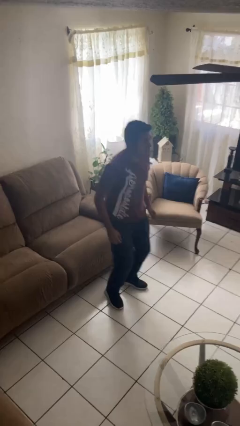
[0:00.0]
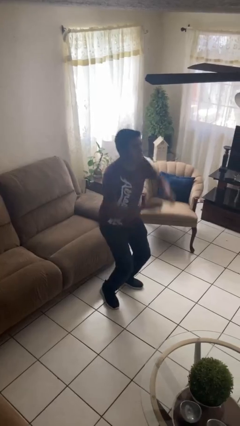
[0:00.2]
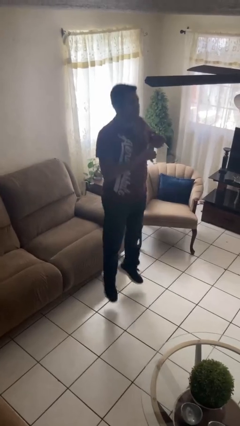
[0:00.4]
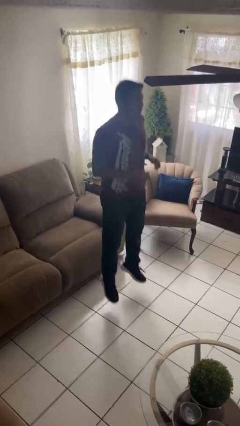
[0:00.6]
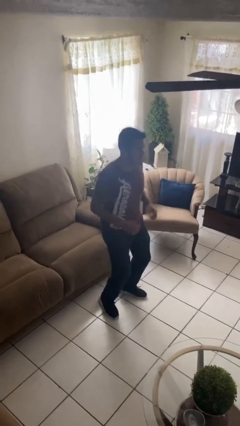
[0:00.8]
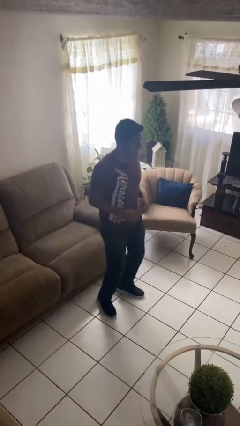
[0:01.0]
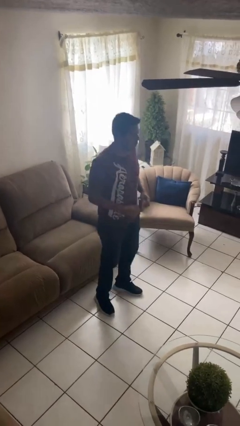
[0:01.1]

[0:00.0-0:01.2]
person jumps

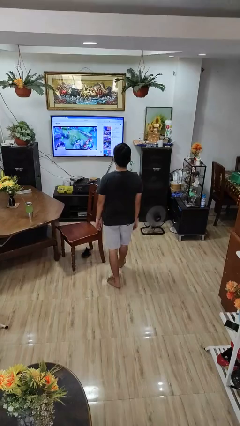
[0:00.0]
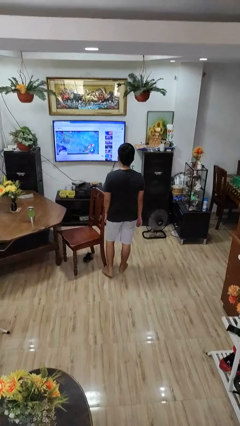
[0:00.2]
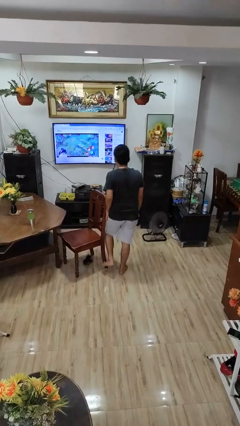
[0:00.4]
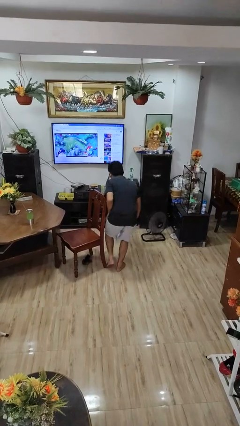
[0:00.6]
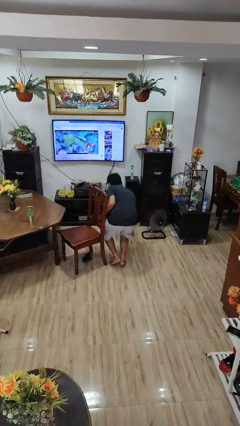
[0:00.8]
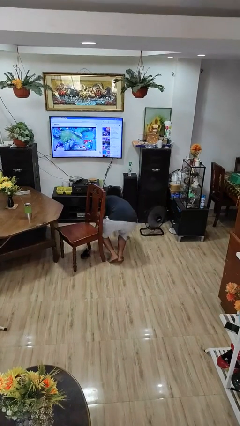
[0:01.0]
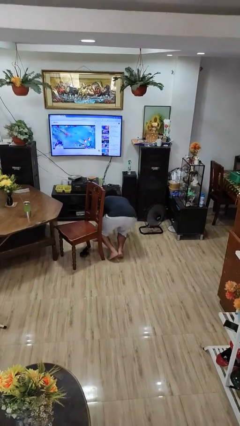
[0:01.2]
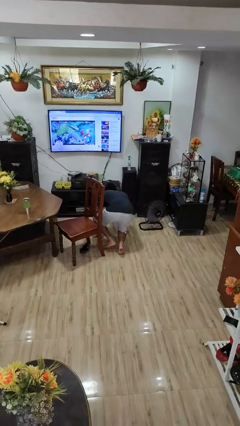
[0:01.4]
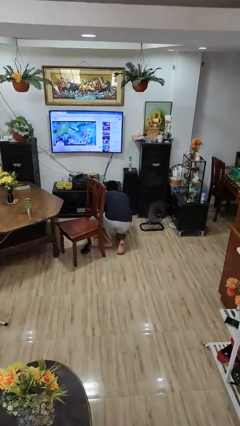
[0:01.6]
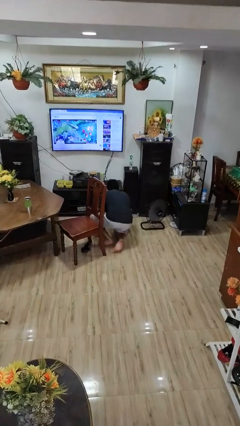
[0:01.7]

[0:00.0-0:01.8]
person trips on object on floor

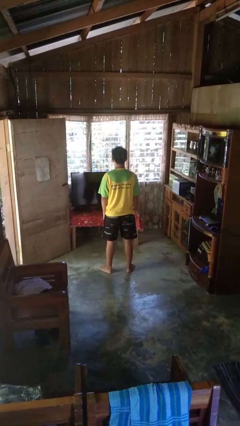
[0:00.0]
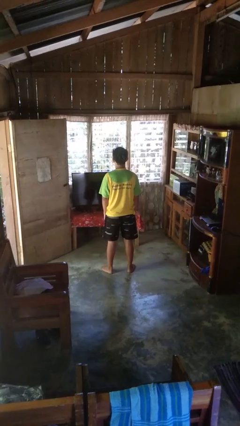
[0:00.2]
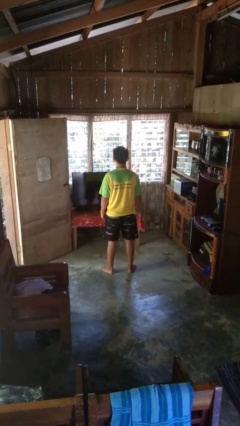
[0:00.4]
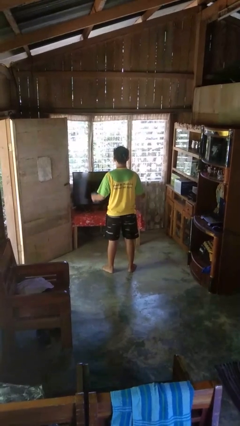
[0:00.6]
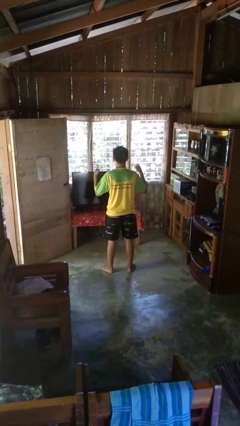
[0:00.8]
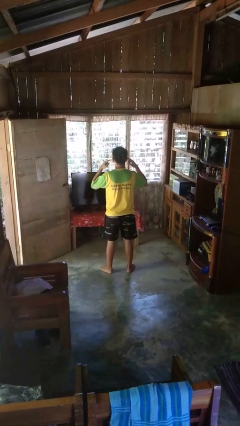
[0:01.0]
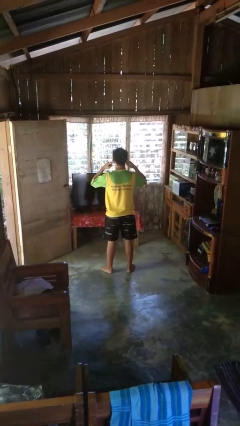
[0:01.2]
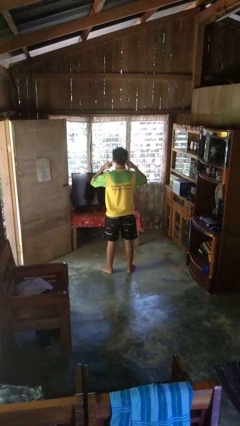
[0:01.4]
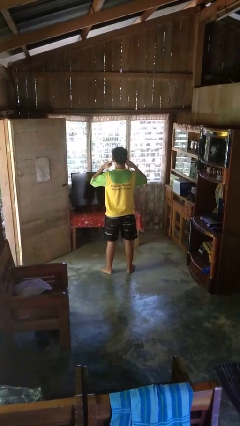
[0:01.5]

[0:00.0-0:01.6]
person puts fingers in ear

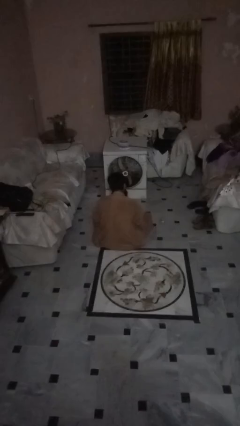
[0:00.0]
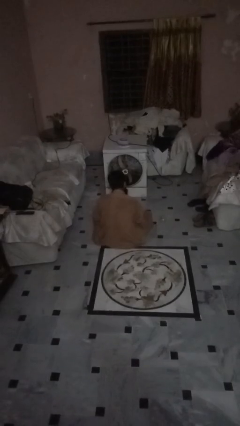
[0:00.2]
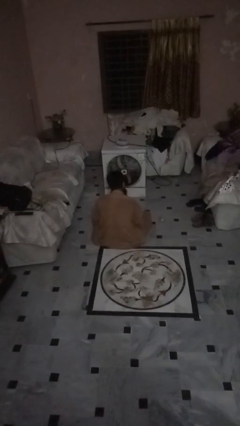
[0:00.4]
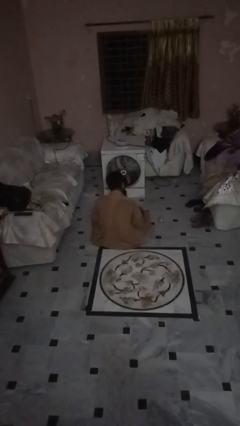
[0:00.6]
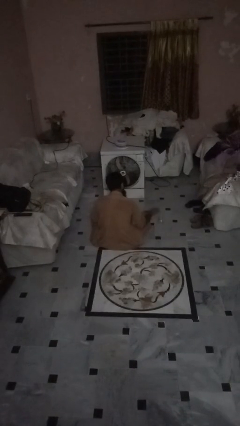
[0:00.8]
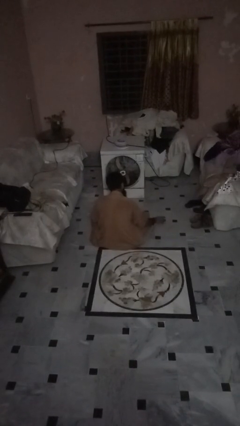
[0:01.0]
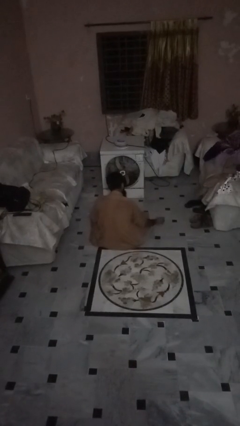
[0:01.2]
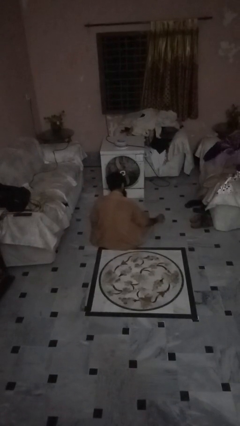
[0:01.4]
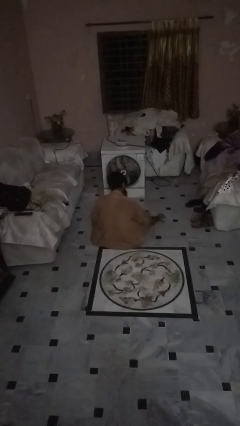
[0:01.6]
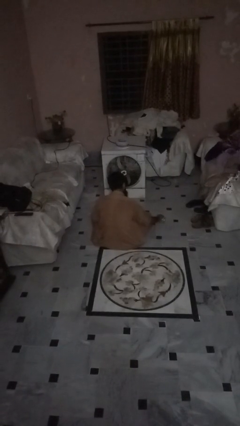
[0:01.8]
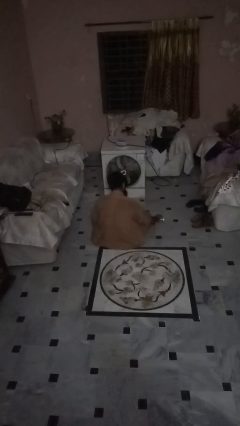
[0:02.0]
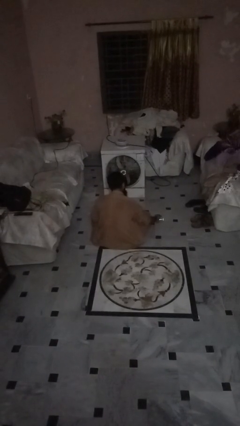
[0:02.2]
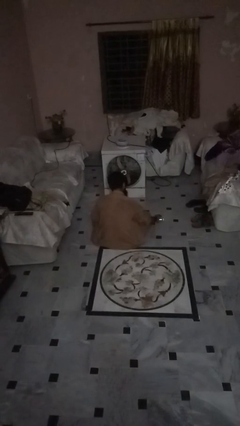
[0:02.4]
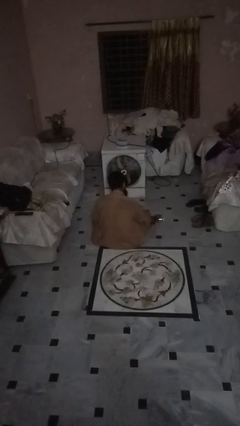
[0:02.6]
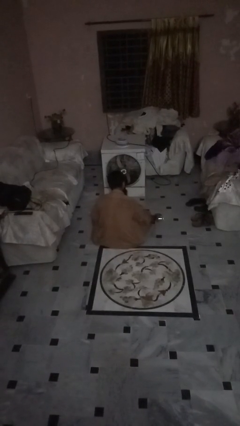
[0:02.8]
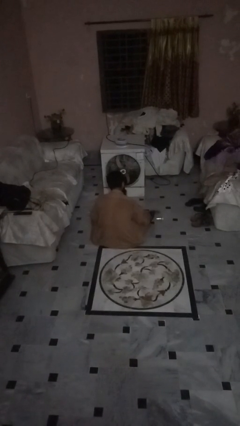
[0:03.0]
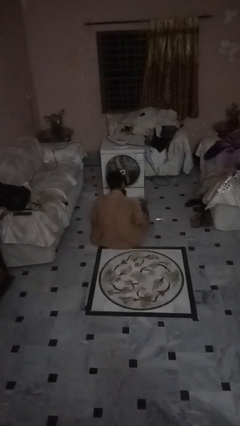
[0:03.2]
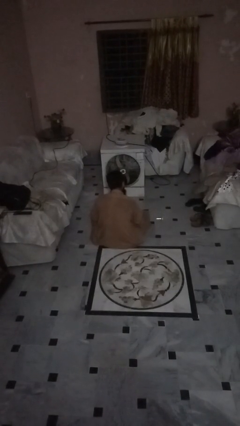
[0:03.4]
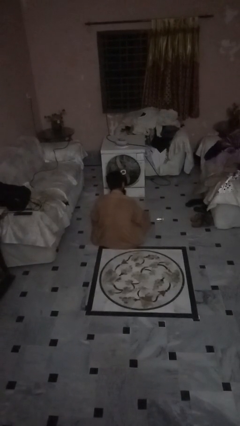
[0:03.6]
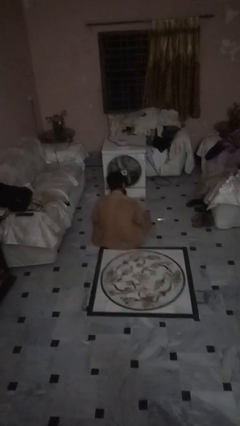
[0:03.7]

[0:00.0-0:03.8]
person spills on floor

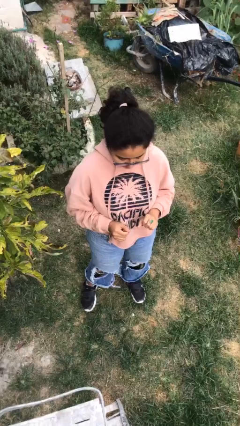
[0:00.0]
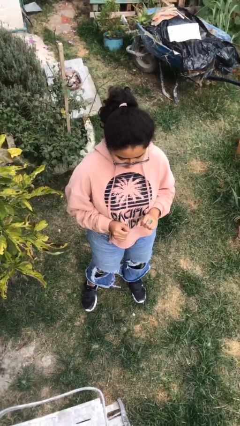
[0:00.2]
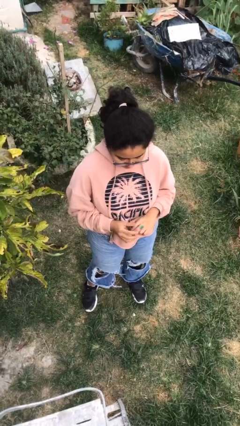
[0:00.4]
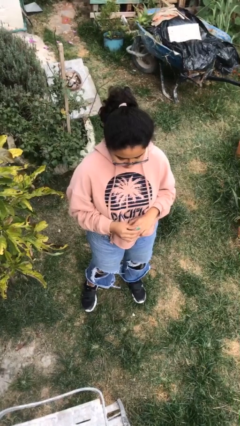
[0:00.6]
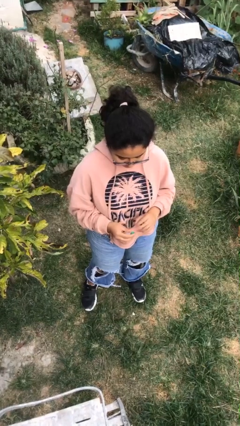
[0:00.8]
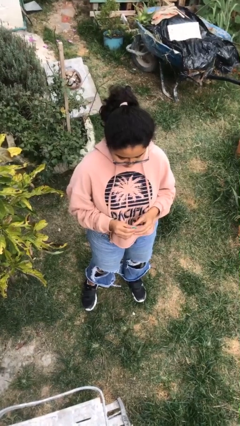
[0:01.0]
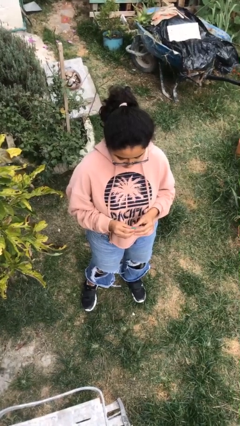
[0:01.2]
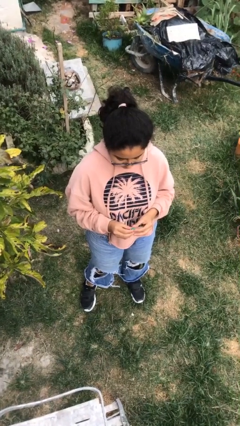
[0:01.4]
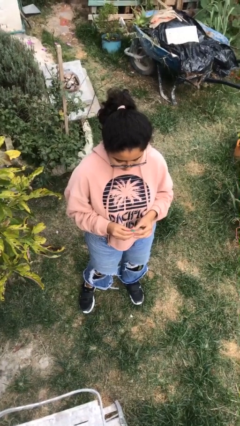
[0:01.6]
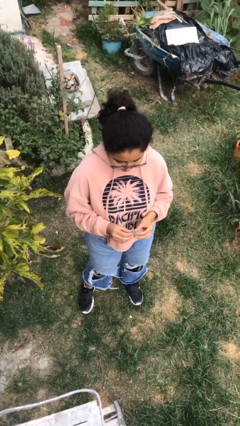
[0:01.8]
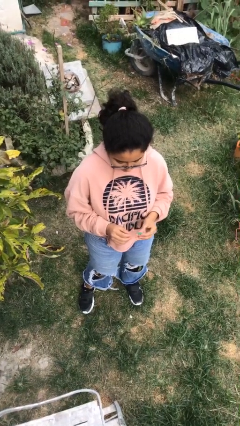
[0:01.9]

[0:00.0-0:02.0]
person takes off ring

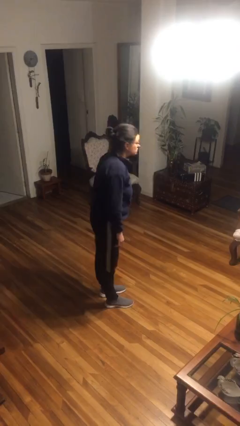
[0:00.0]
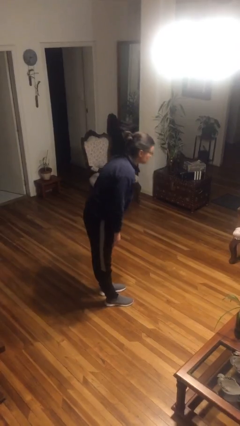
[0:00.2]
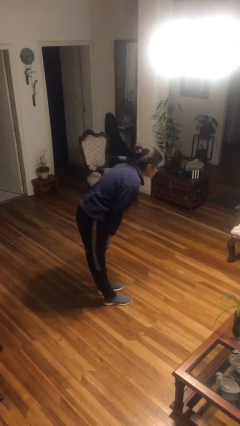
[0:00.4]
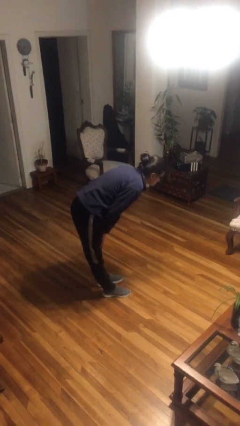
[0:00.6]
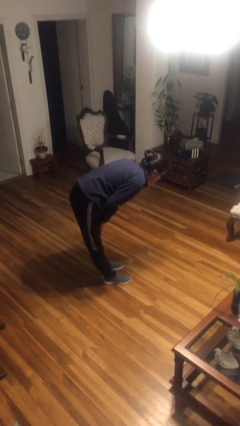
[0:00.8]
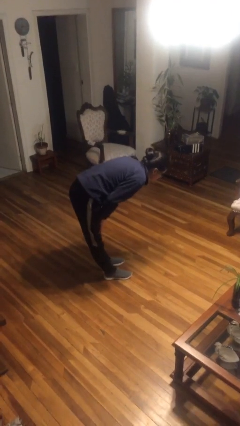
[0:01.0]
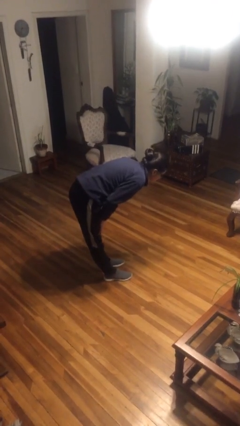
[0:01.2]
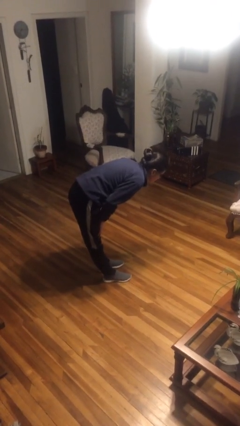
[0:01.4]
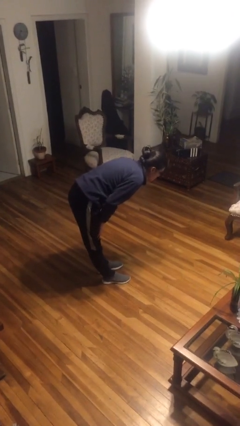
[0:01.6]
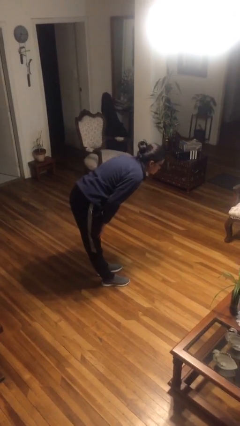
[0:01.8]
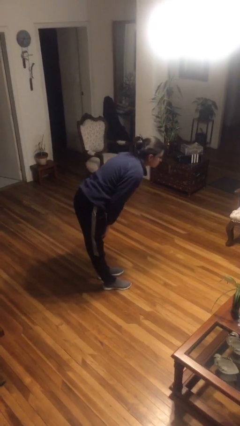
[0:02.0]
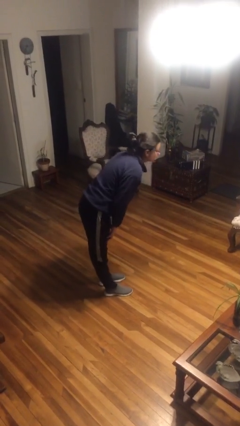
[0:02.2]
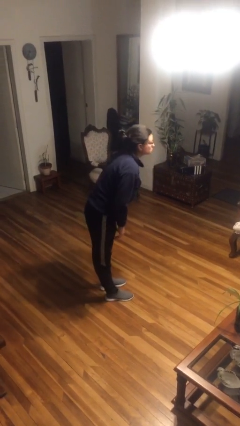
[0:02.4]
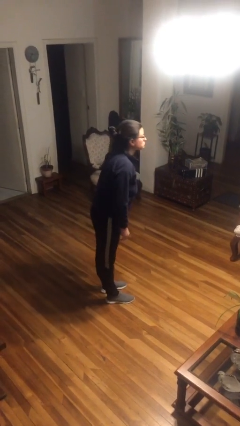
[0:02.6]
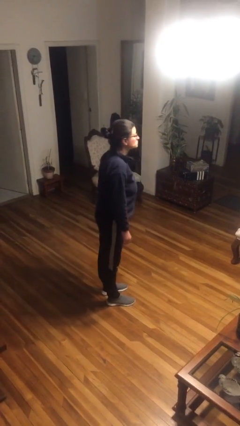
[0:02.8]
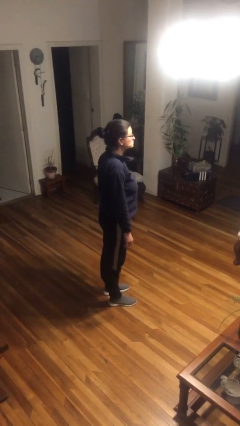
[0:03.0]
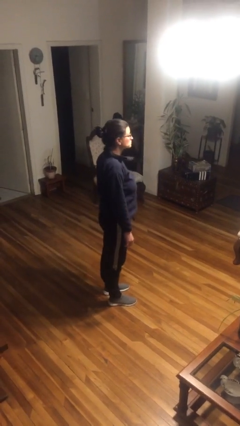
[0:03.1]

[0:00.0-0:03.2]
person bows

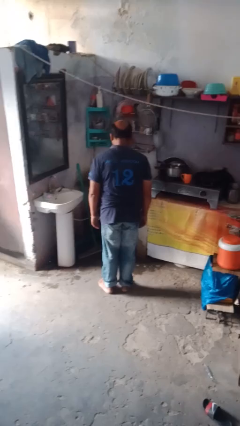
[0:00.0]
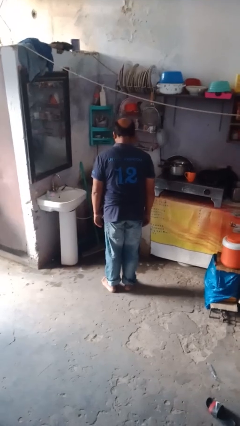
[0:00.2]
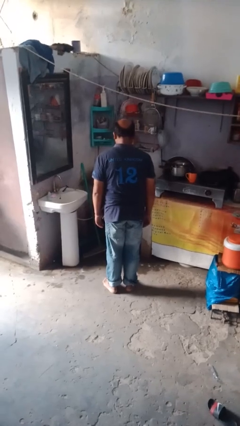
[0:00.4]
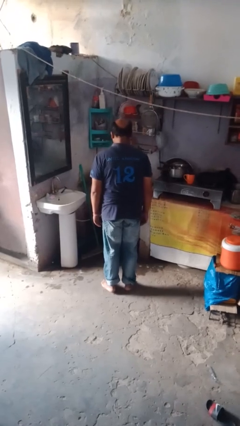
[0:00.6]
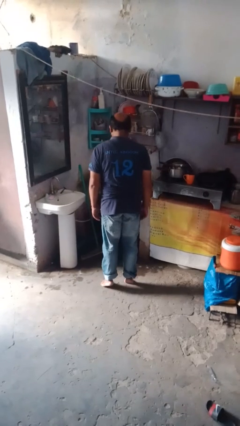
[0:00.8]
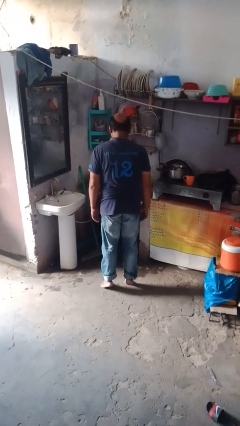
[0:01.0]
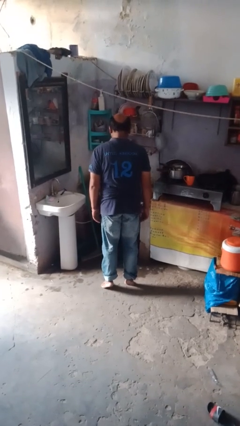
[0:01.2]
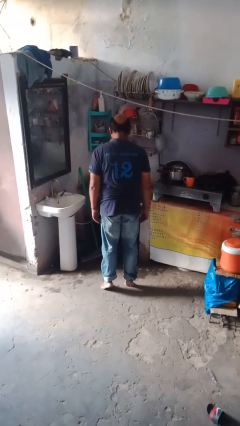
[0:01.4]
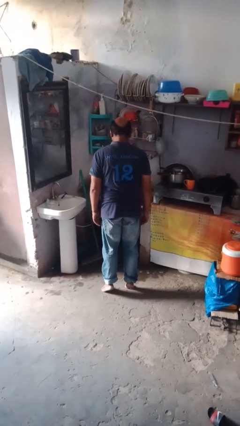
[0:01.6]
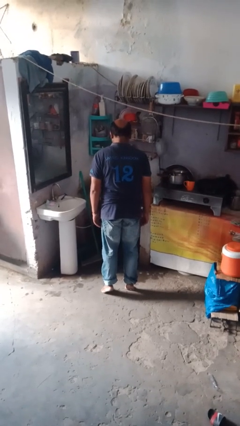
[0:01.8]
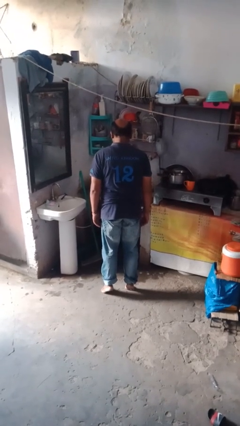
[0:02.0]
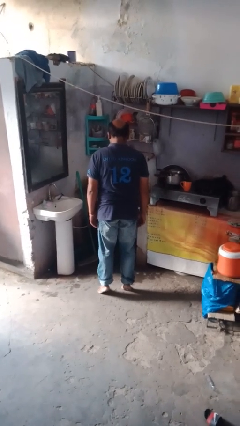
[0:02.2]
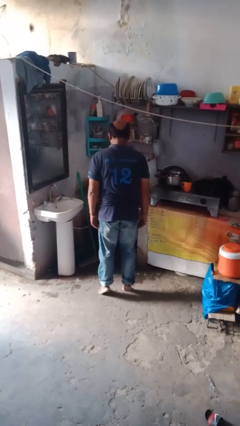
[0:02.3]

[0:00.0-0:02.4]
person walks tiptoe

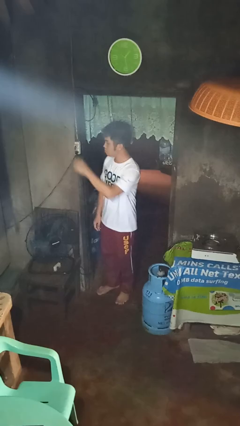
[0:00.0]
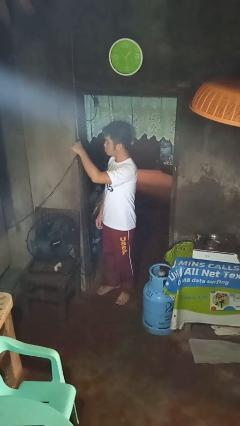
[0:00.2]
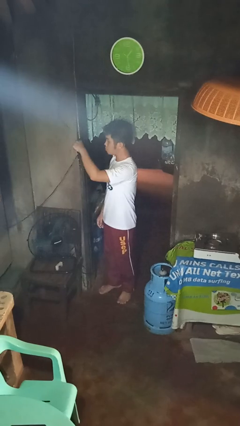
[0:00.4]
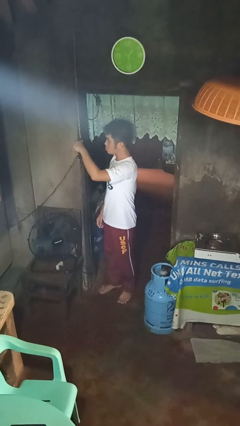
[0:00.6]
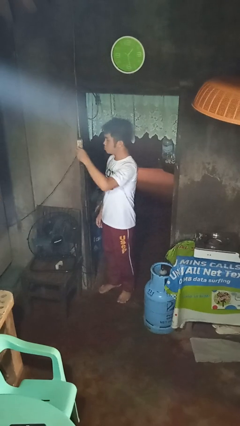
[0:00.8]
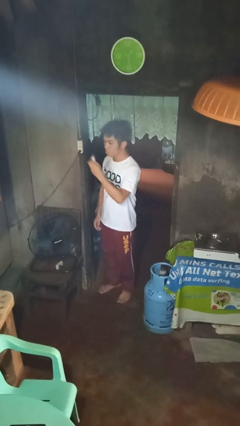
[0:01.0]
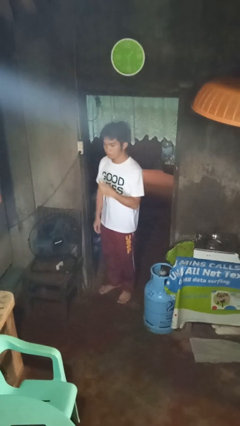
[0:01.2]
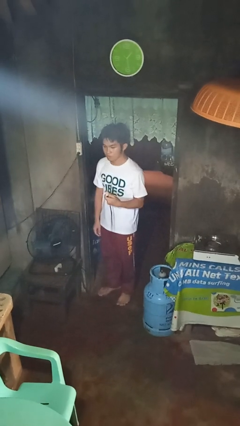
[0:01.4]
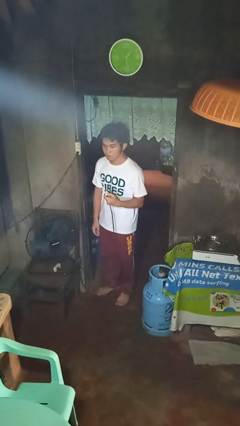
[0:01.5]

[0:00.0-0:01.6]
person unplugs from electrical socket
